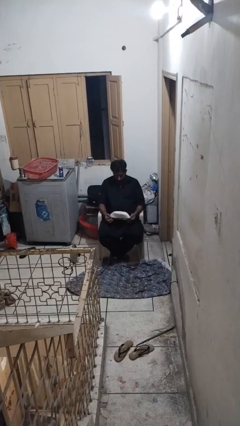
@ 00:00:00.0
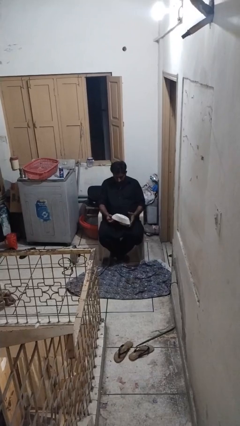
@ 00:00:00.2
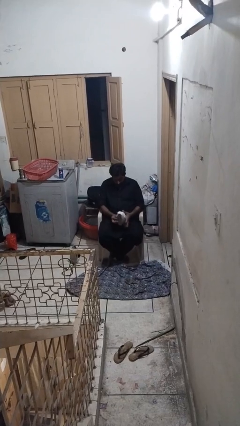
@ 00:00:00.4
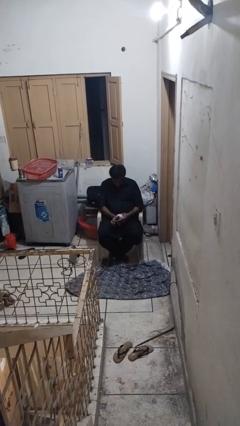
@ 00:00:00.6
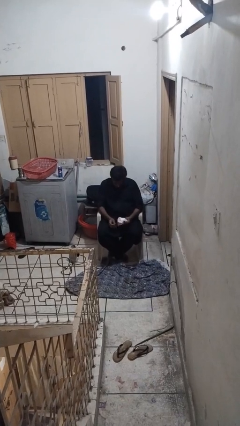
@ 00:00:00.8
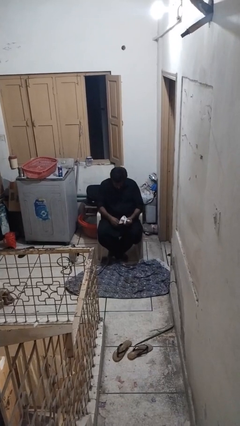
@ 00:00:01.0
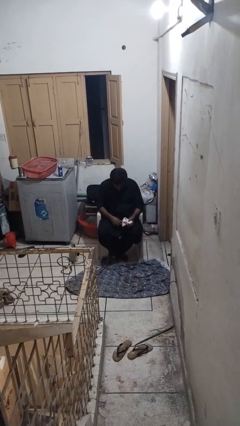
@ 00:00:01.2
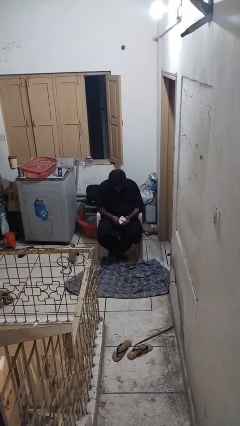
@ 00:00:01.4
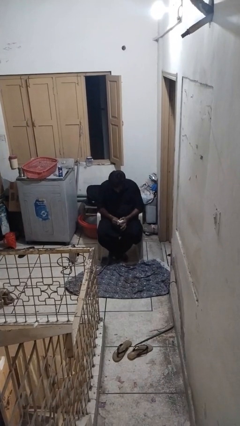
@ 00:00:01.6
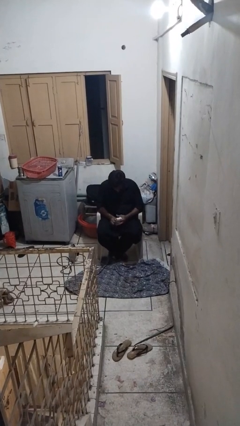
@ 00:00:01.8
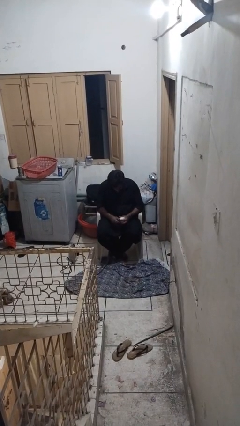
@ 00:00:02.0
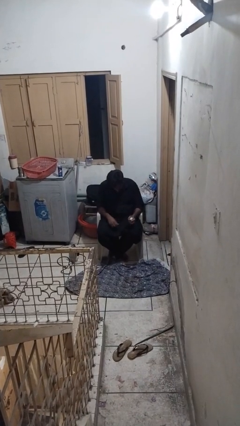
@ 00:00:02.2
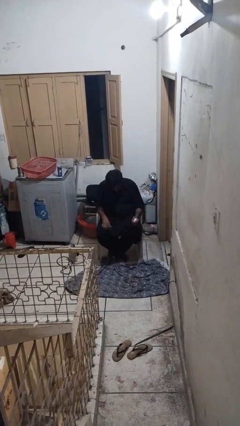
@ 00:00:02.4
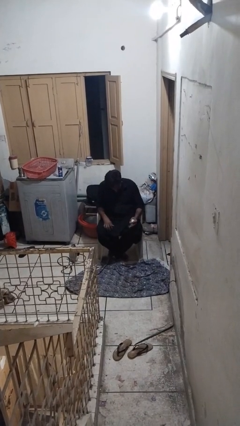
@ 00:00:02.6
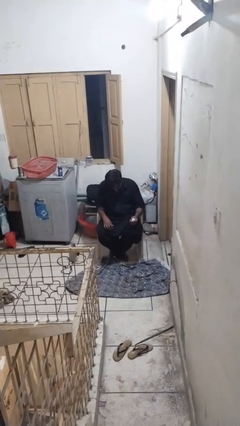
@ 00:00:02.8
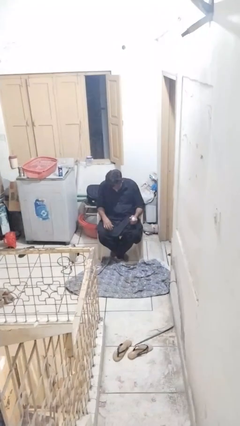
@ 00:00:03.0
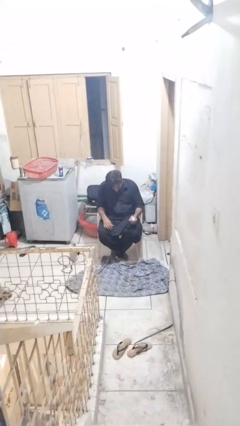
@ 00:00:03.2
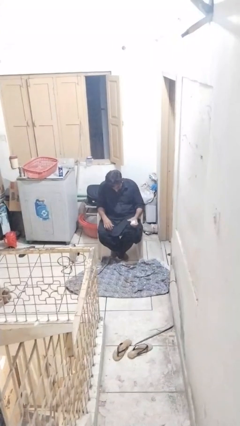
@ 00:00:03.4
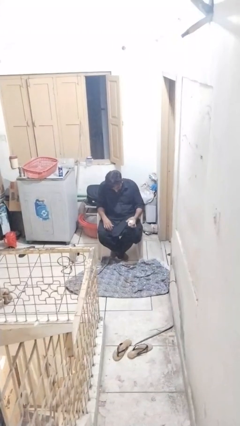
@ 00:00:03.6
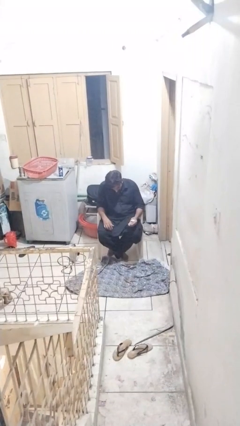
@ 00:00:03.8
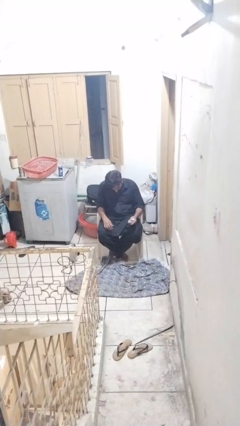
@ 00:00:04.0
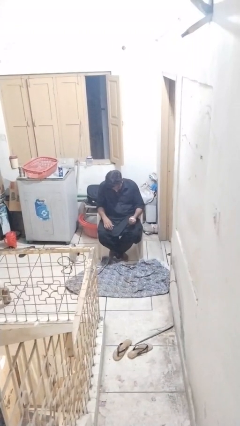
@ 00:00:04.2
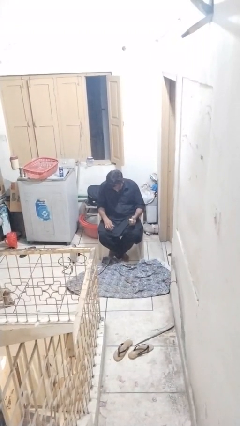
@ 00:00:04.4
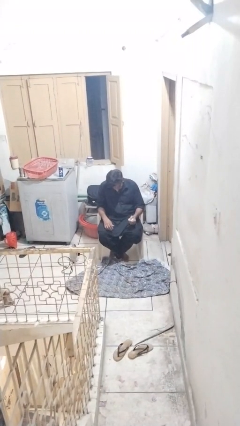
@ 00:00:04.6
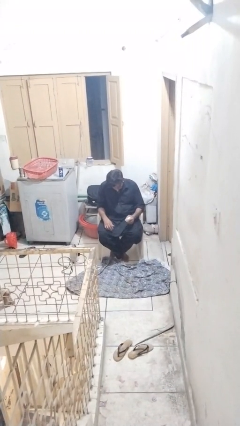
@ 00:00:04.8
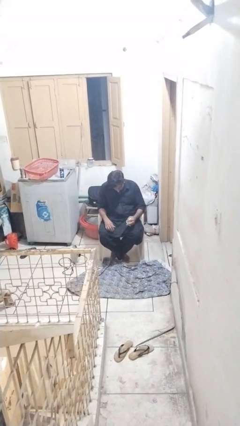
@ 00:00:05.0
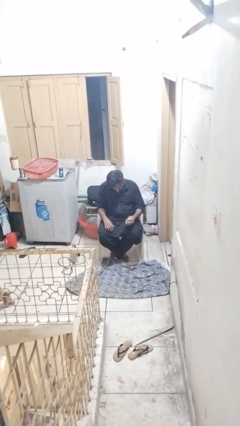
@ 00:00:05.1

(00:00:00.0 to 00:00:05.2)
person squeezes object

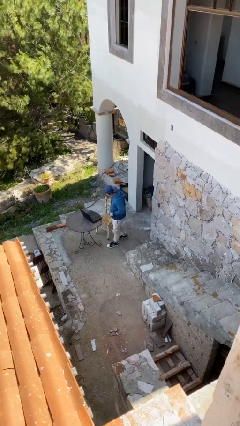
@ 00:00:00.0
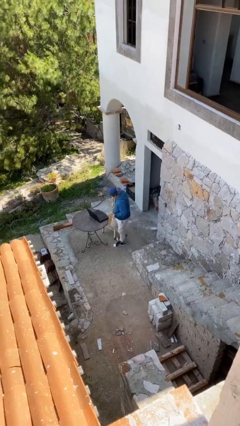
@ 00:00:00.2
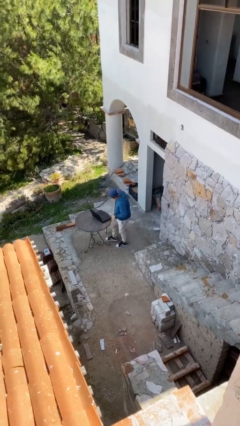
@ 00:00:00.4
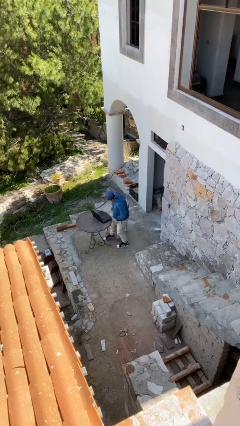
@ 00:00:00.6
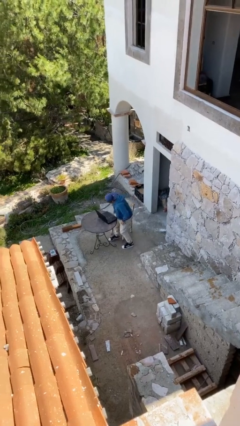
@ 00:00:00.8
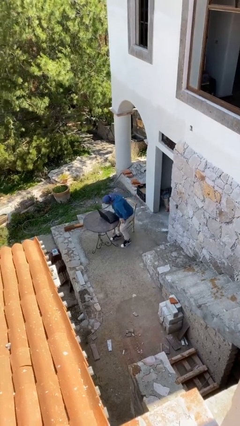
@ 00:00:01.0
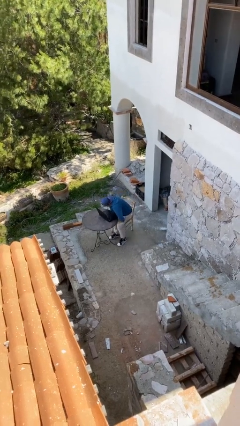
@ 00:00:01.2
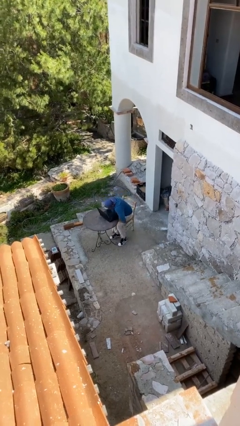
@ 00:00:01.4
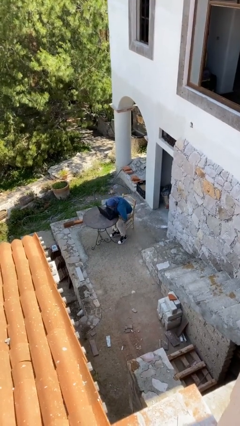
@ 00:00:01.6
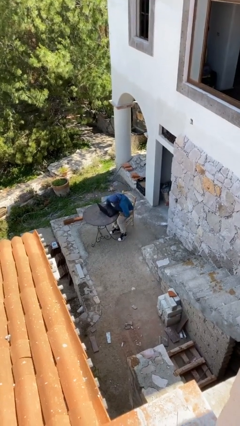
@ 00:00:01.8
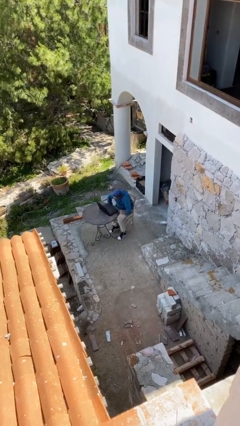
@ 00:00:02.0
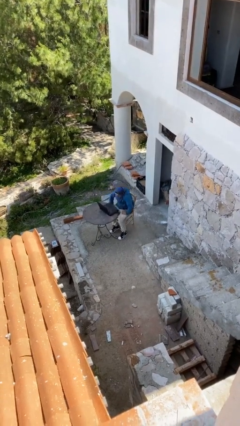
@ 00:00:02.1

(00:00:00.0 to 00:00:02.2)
person sits down

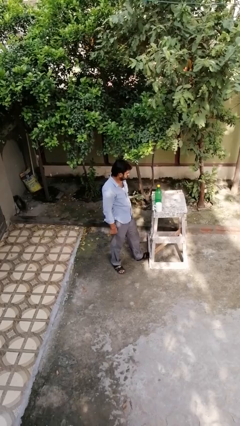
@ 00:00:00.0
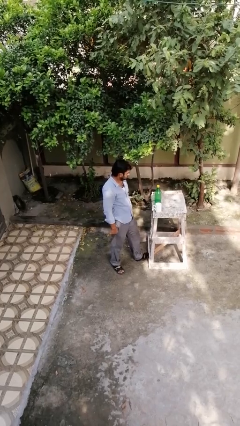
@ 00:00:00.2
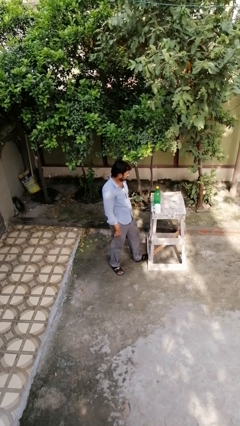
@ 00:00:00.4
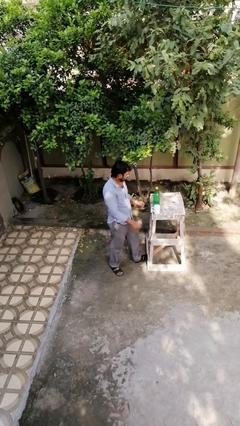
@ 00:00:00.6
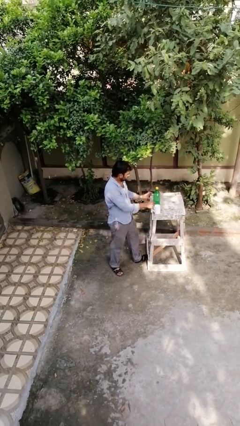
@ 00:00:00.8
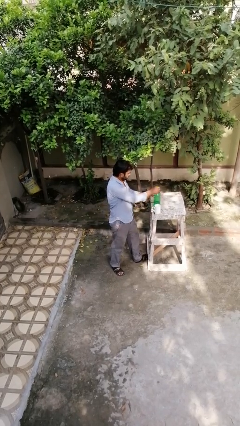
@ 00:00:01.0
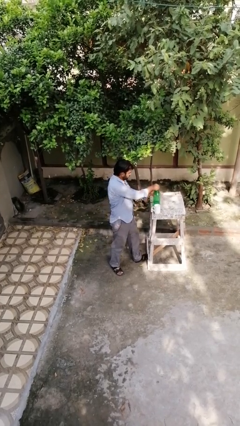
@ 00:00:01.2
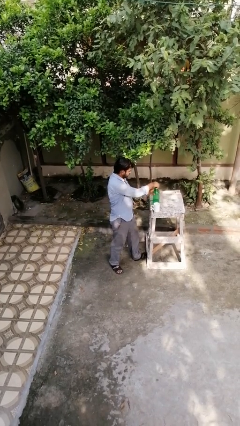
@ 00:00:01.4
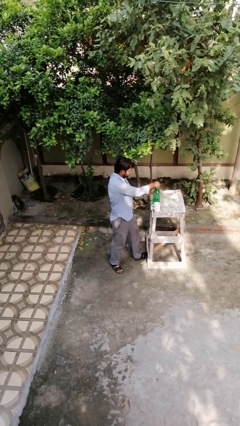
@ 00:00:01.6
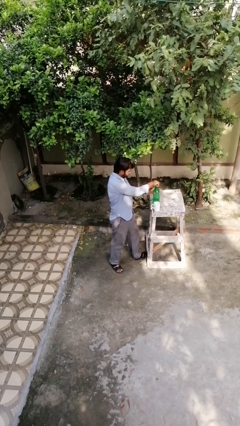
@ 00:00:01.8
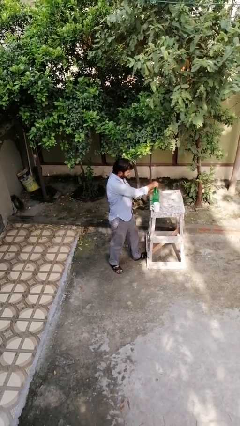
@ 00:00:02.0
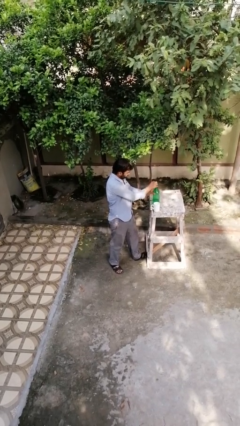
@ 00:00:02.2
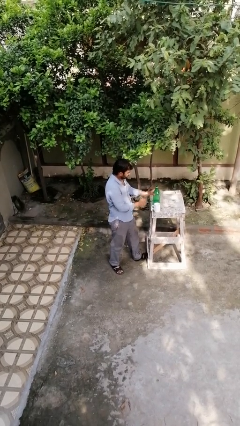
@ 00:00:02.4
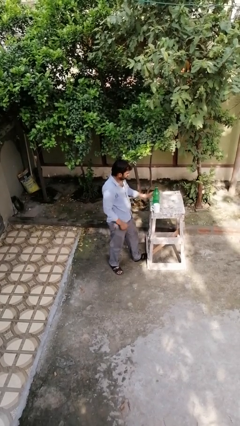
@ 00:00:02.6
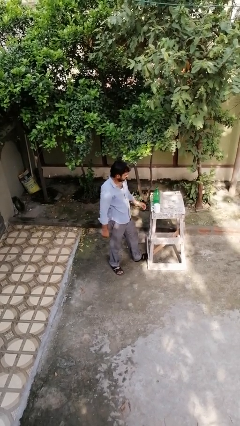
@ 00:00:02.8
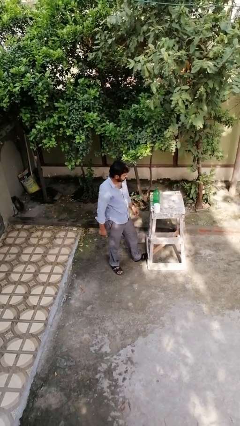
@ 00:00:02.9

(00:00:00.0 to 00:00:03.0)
person unscrews lid from bottle

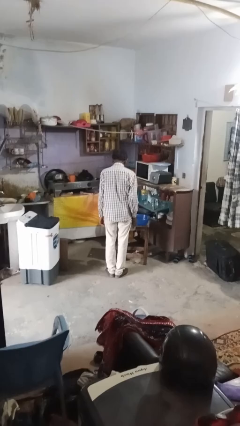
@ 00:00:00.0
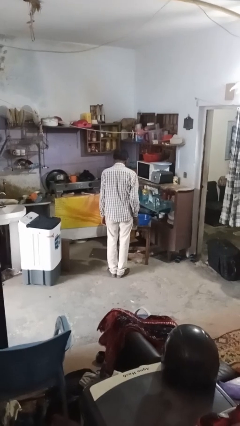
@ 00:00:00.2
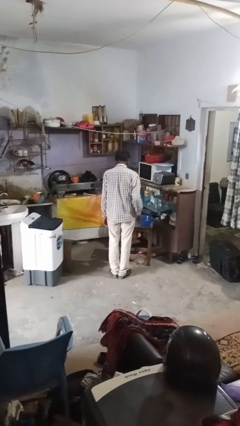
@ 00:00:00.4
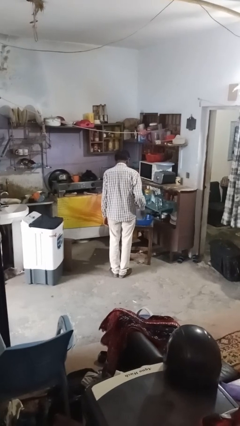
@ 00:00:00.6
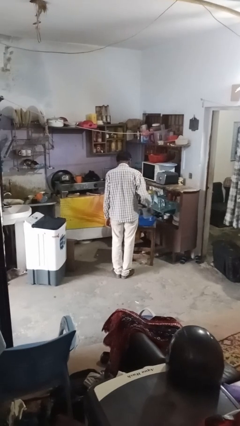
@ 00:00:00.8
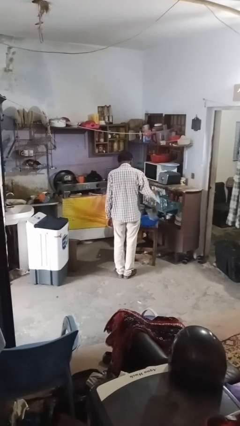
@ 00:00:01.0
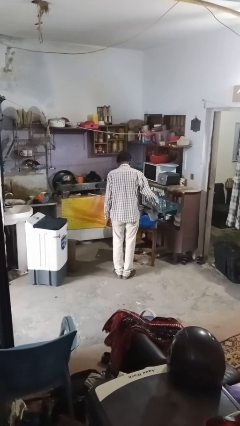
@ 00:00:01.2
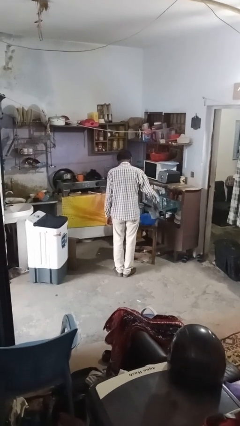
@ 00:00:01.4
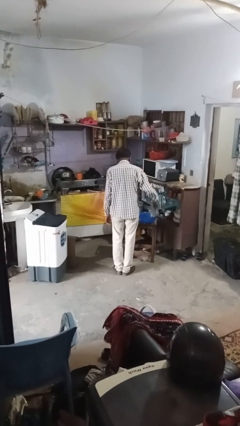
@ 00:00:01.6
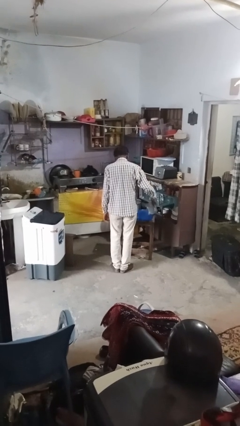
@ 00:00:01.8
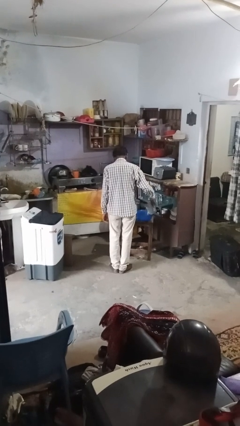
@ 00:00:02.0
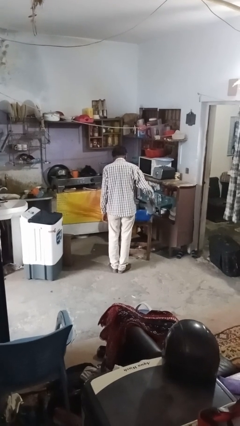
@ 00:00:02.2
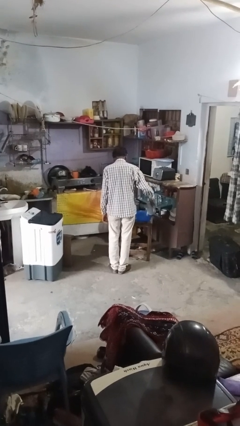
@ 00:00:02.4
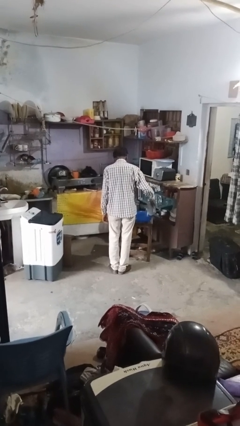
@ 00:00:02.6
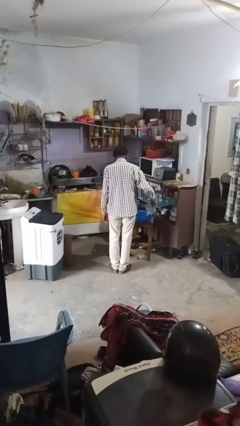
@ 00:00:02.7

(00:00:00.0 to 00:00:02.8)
person pours into bowl

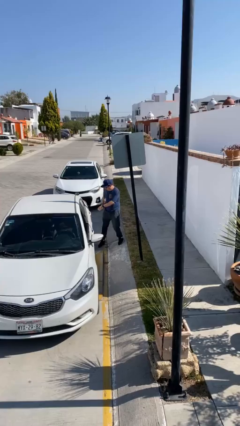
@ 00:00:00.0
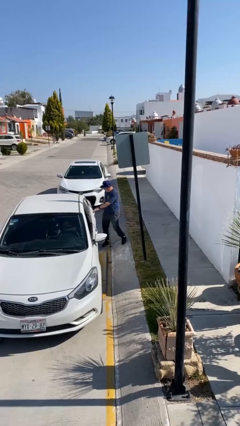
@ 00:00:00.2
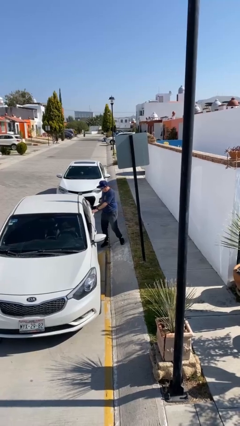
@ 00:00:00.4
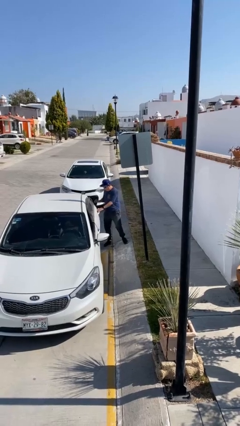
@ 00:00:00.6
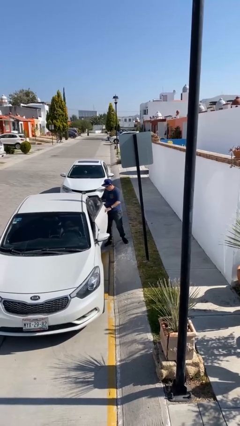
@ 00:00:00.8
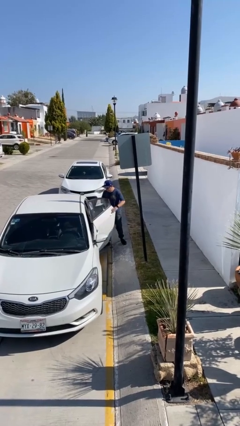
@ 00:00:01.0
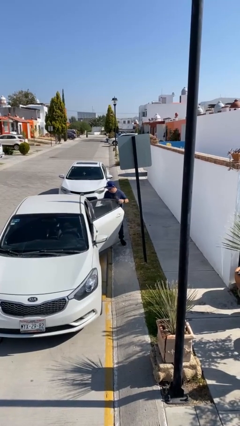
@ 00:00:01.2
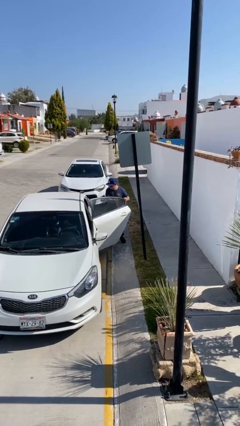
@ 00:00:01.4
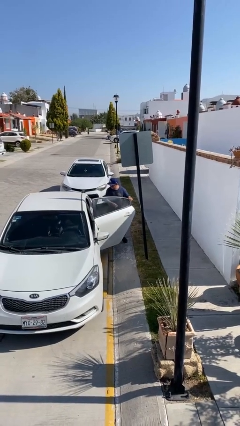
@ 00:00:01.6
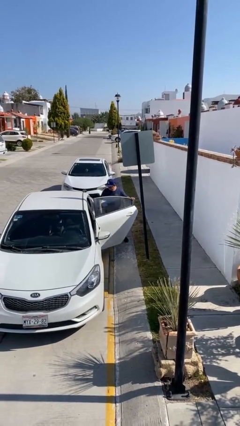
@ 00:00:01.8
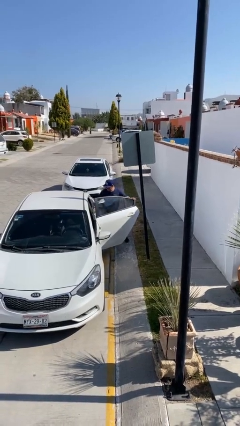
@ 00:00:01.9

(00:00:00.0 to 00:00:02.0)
person opens car door

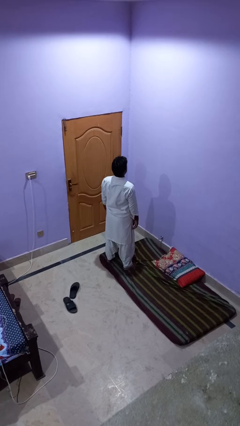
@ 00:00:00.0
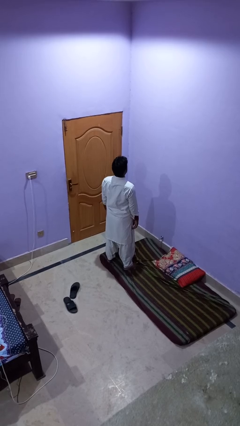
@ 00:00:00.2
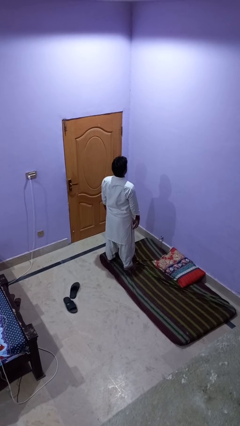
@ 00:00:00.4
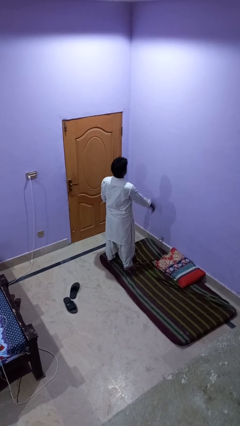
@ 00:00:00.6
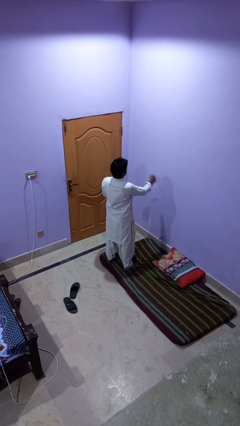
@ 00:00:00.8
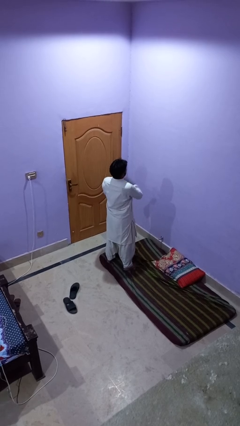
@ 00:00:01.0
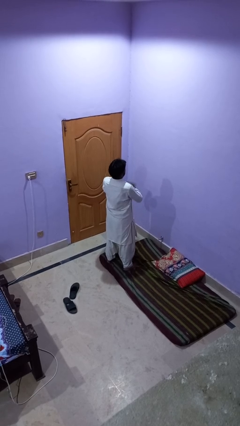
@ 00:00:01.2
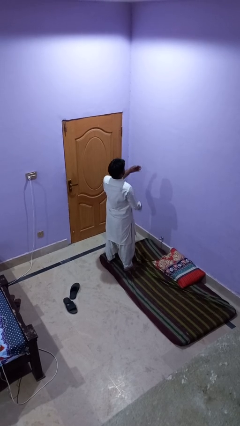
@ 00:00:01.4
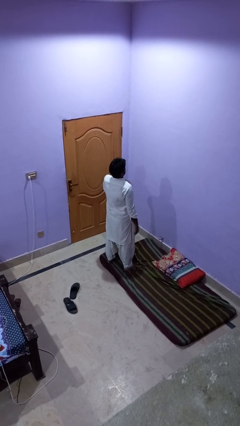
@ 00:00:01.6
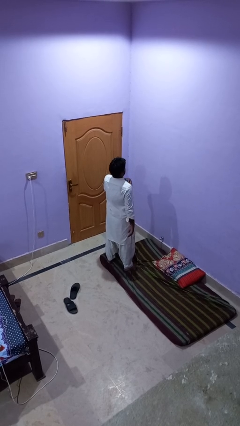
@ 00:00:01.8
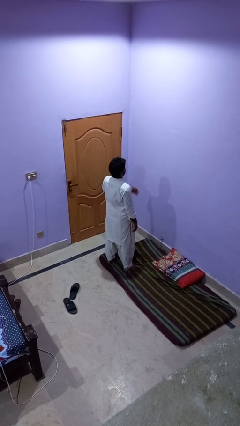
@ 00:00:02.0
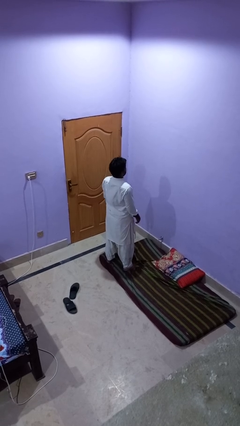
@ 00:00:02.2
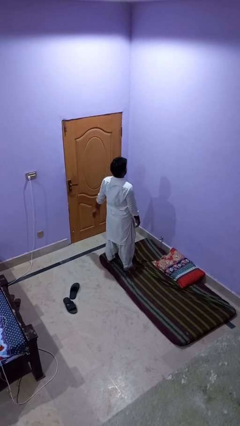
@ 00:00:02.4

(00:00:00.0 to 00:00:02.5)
person drums on chest
